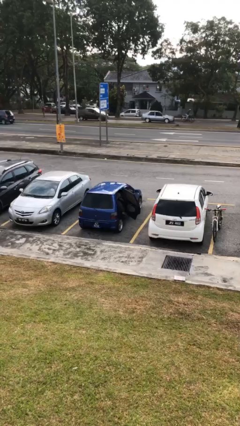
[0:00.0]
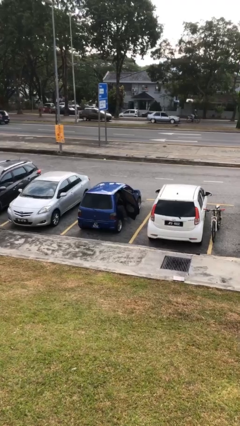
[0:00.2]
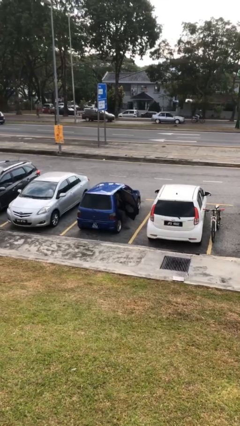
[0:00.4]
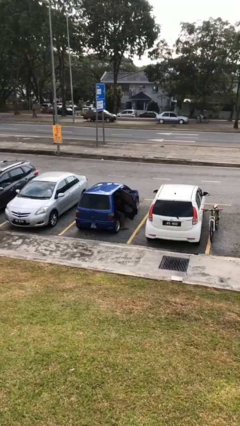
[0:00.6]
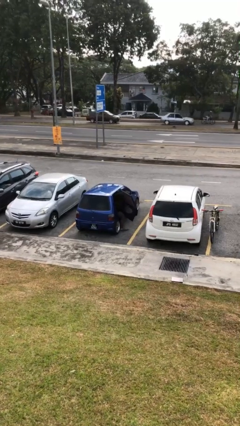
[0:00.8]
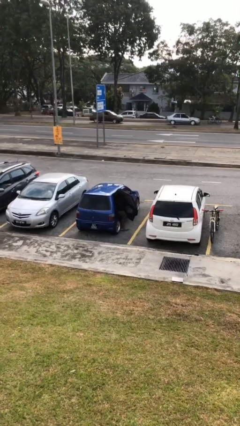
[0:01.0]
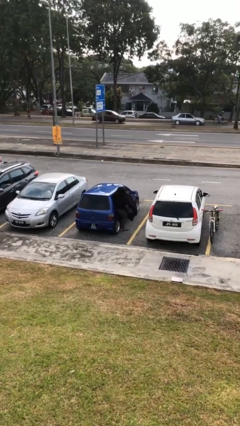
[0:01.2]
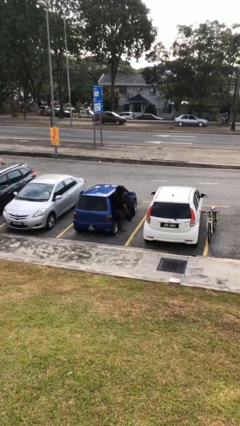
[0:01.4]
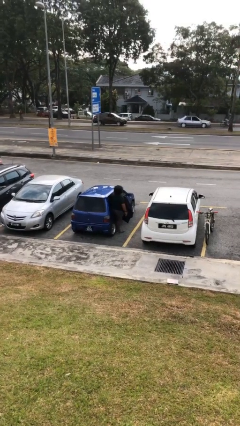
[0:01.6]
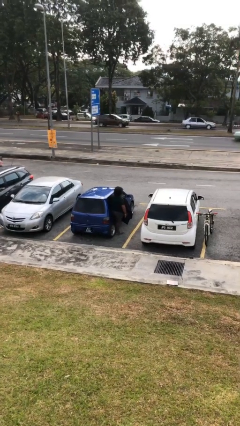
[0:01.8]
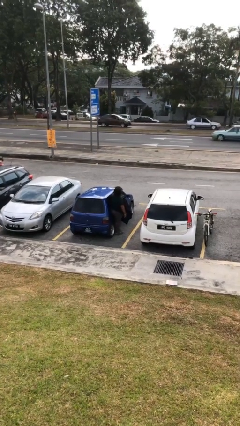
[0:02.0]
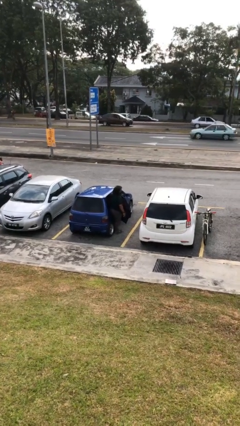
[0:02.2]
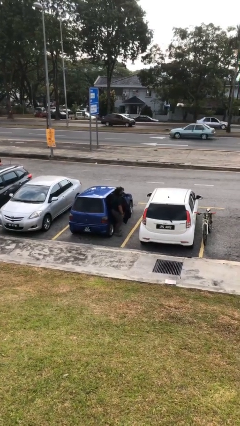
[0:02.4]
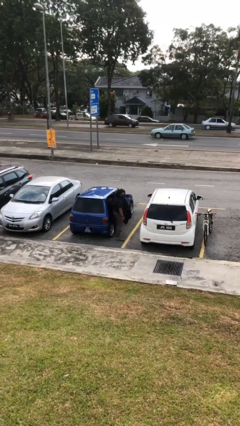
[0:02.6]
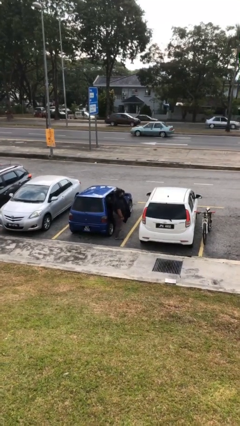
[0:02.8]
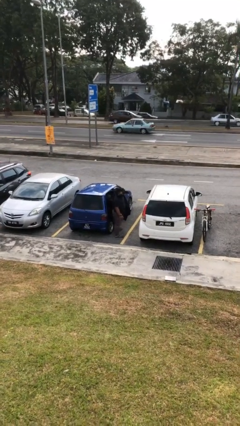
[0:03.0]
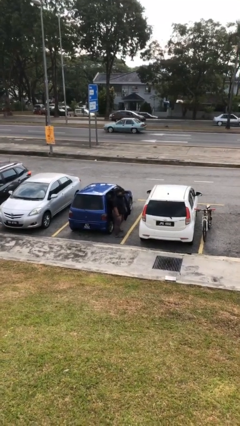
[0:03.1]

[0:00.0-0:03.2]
person exits car

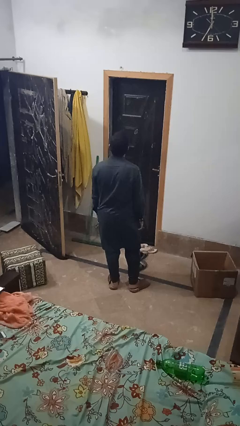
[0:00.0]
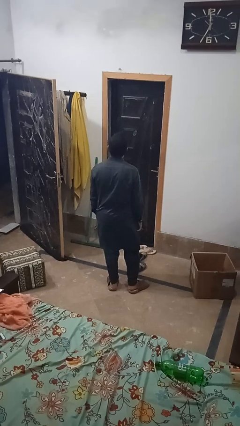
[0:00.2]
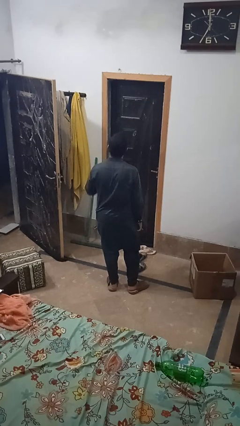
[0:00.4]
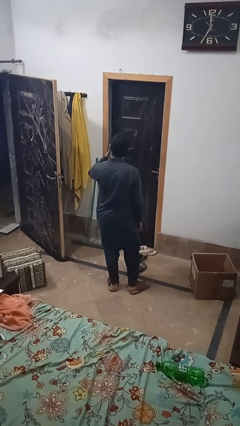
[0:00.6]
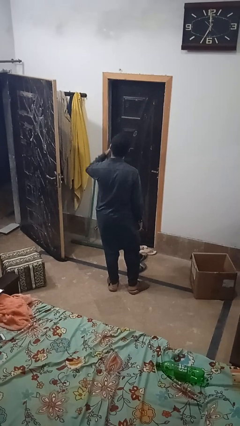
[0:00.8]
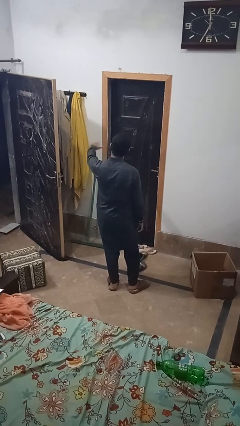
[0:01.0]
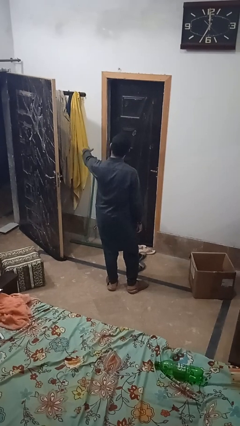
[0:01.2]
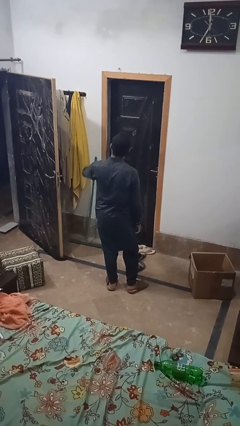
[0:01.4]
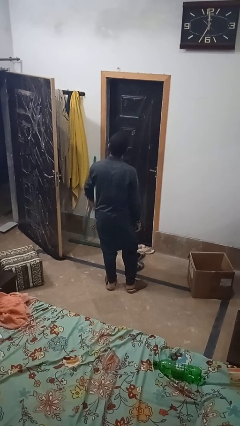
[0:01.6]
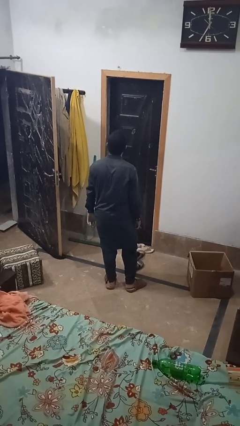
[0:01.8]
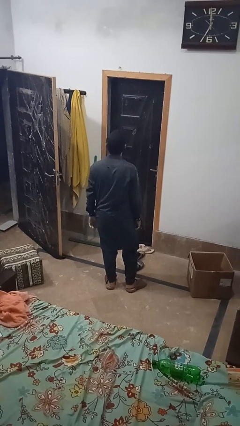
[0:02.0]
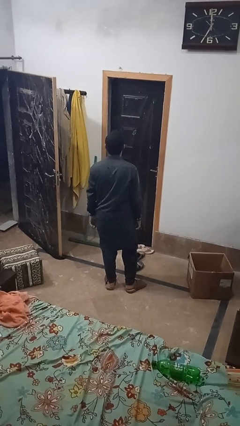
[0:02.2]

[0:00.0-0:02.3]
person gestures blow kiss

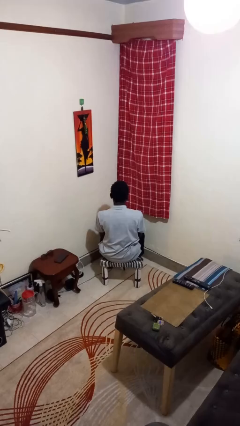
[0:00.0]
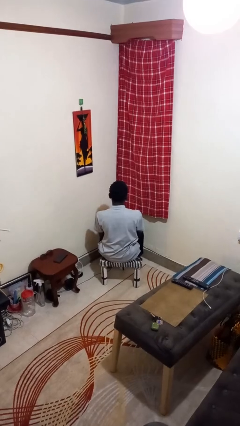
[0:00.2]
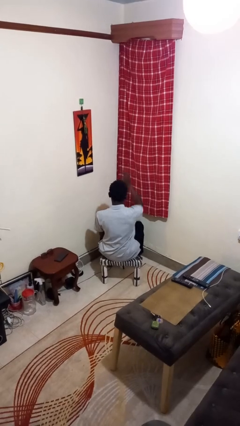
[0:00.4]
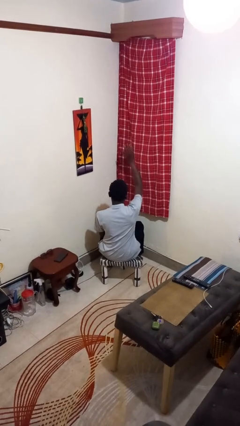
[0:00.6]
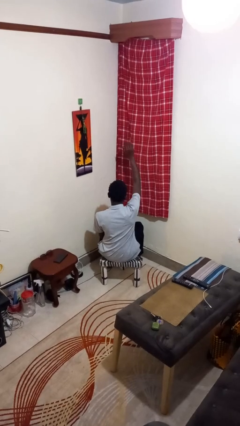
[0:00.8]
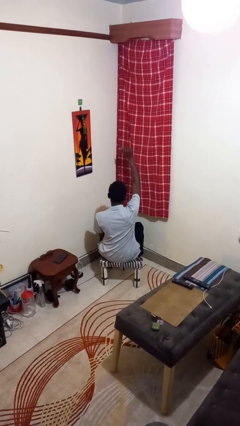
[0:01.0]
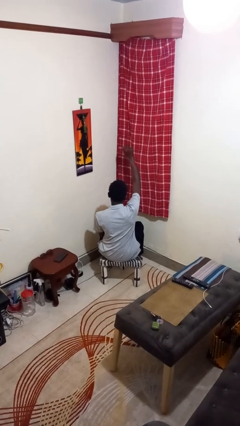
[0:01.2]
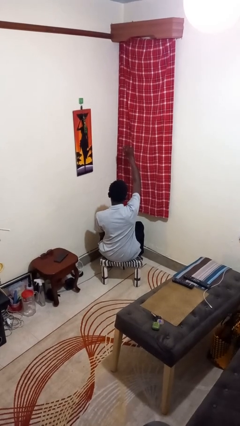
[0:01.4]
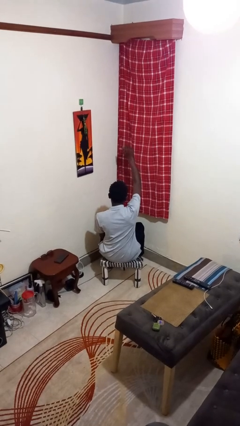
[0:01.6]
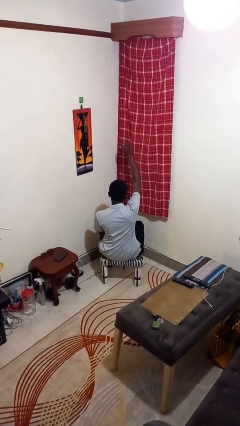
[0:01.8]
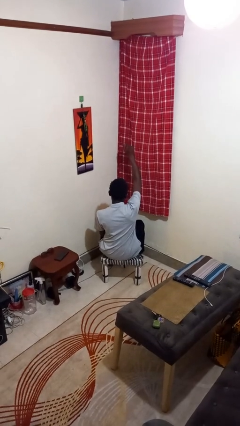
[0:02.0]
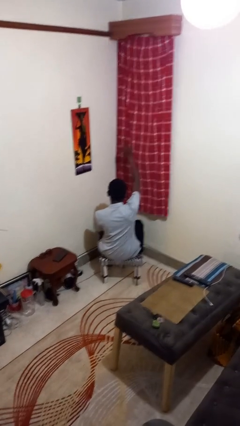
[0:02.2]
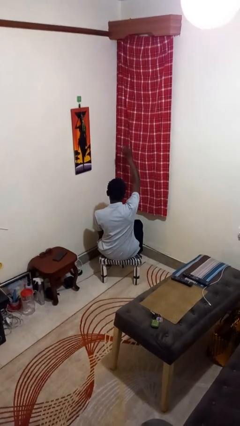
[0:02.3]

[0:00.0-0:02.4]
person gestures come here

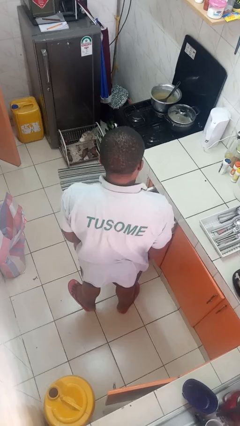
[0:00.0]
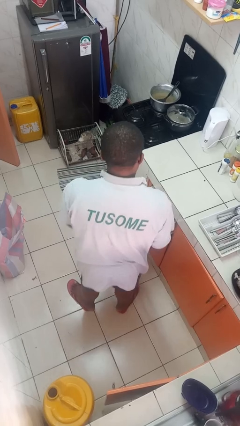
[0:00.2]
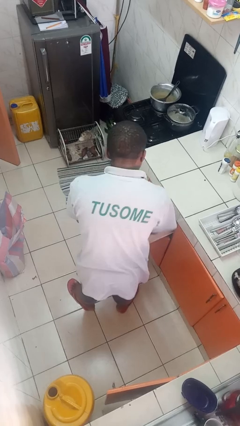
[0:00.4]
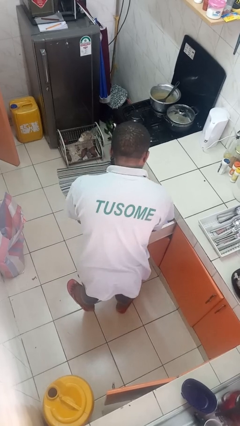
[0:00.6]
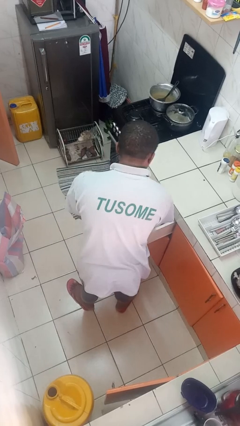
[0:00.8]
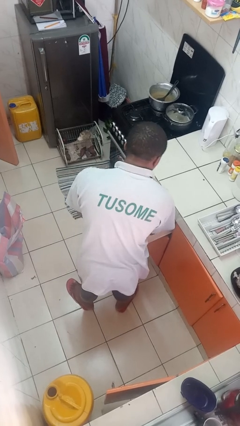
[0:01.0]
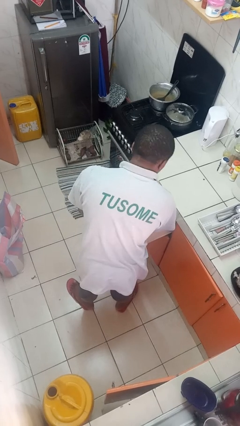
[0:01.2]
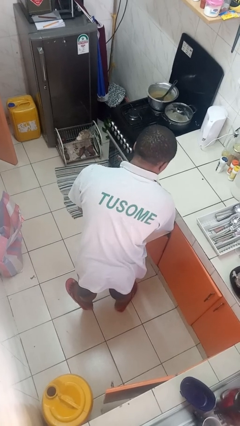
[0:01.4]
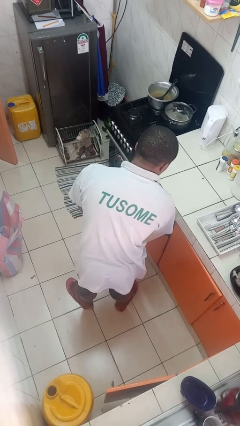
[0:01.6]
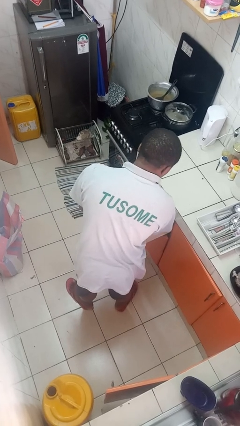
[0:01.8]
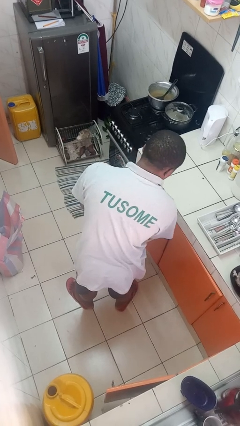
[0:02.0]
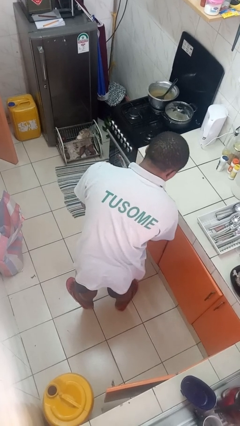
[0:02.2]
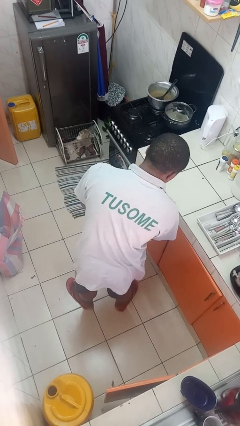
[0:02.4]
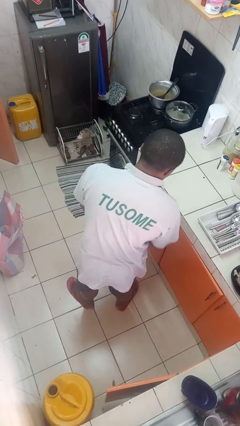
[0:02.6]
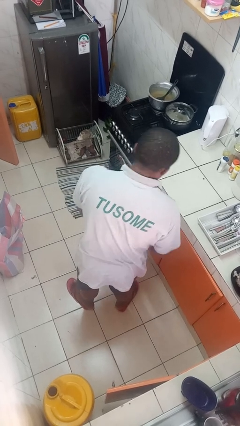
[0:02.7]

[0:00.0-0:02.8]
person searches in kitchen drawer

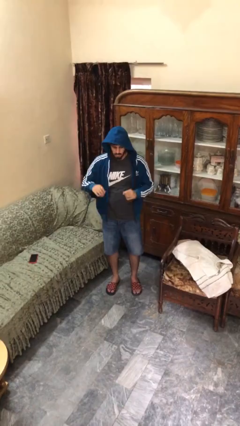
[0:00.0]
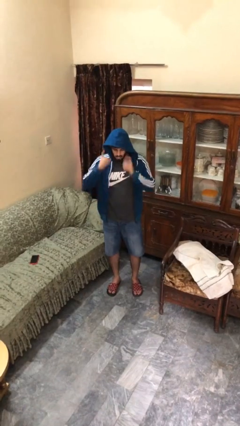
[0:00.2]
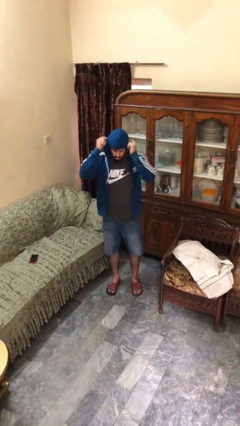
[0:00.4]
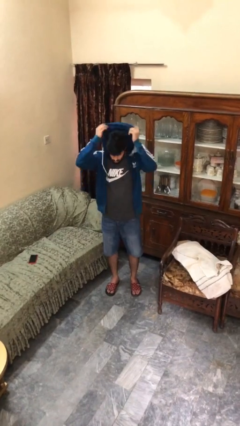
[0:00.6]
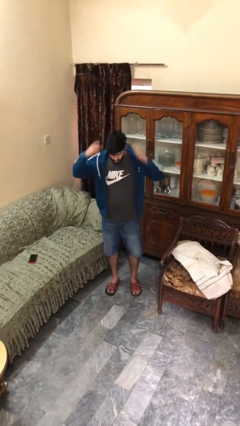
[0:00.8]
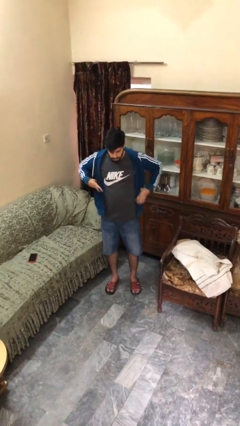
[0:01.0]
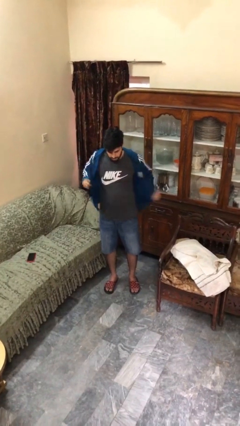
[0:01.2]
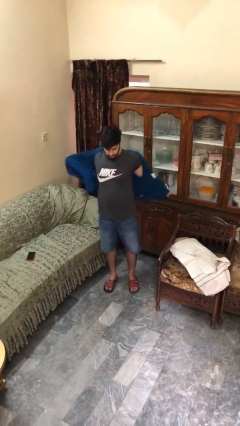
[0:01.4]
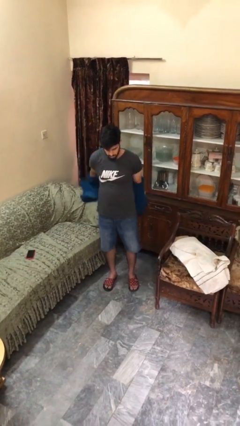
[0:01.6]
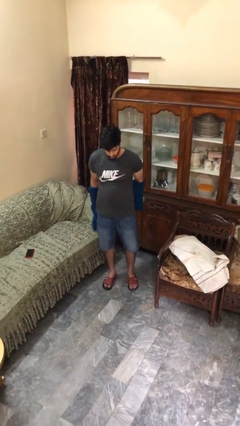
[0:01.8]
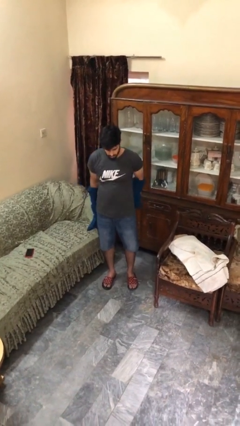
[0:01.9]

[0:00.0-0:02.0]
person takes off hoodie

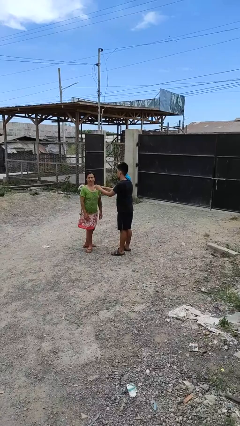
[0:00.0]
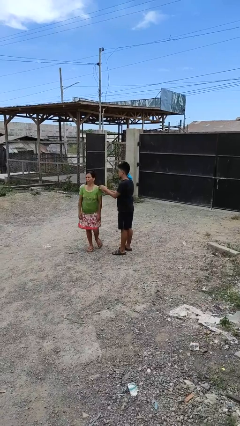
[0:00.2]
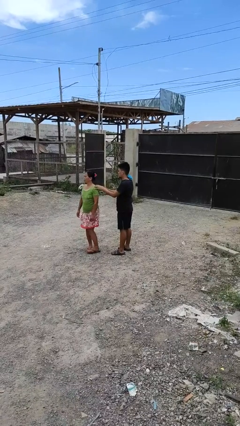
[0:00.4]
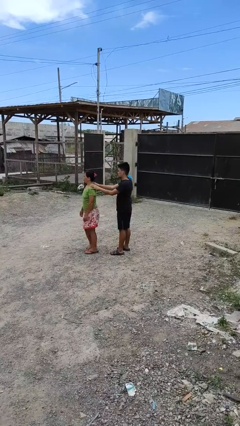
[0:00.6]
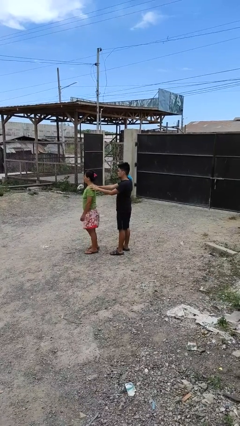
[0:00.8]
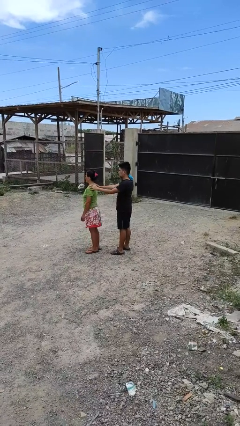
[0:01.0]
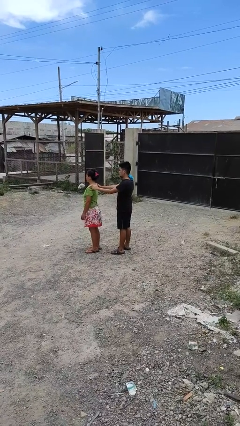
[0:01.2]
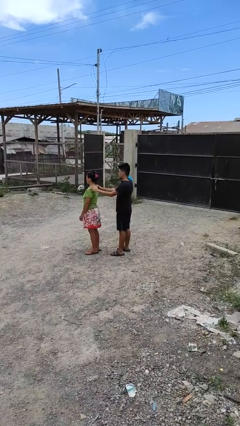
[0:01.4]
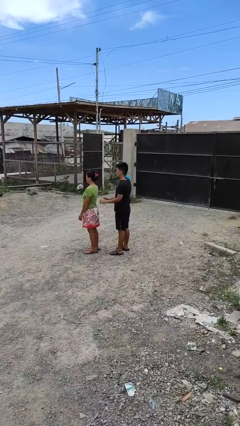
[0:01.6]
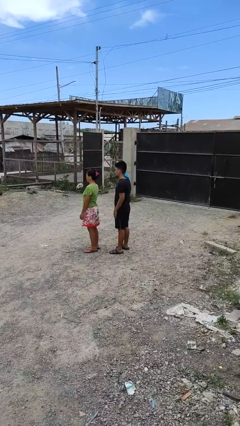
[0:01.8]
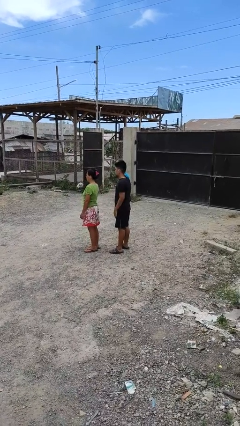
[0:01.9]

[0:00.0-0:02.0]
person spins person around

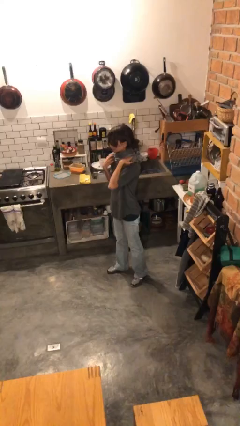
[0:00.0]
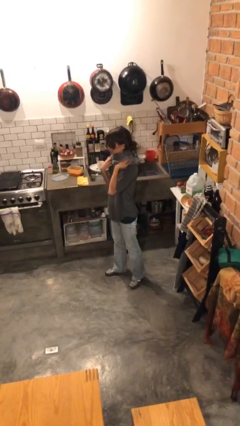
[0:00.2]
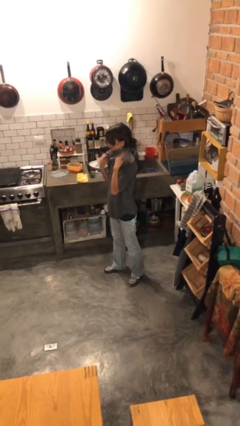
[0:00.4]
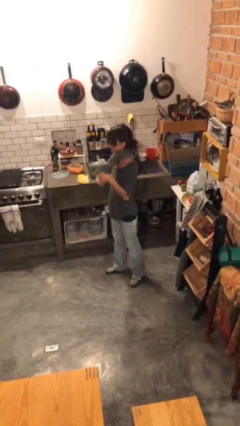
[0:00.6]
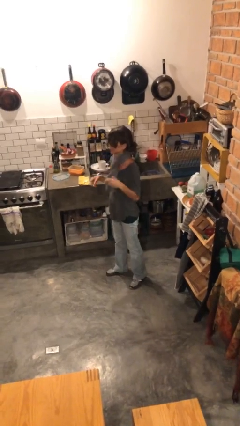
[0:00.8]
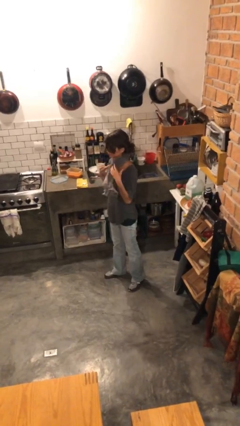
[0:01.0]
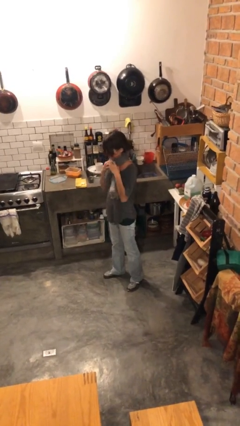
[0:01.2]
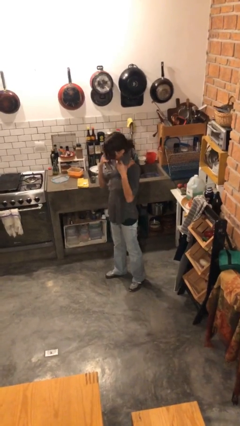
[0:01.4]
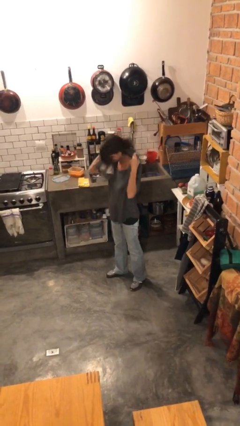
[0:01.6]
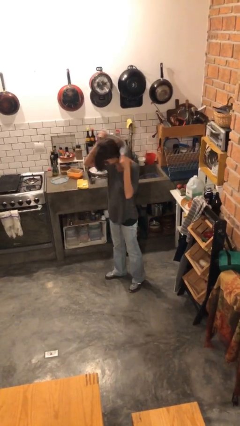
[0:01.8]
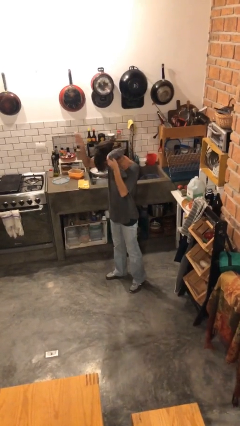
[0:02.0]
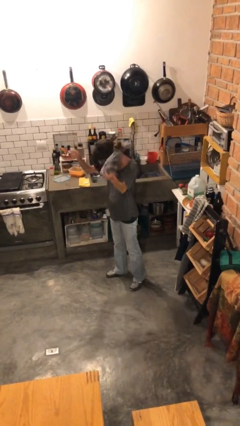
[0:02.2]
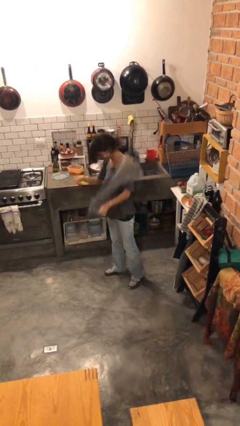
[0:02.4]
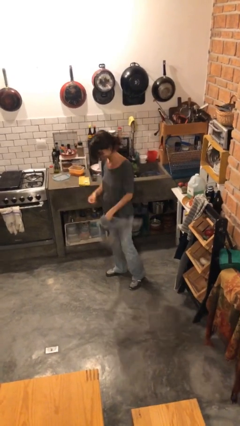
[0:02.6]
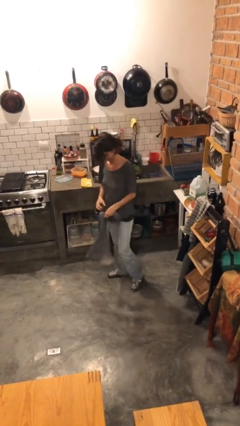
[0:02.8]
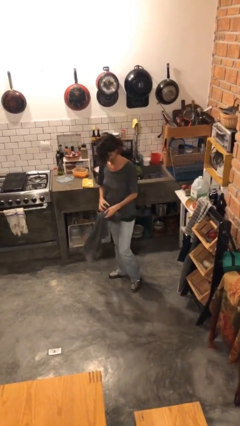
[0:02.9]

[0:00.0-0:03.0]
person takes off scarf
